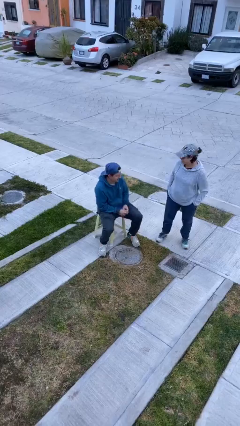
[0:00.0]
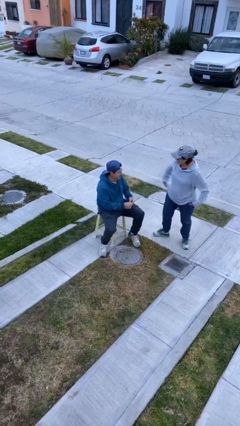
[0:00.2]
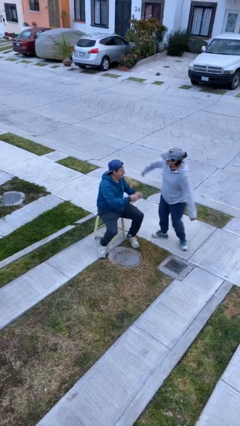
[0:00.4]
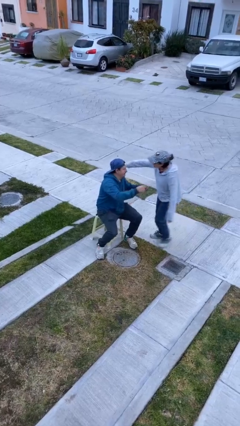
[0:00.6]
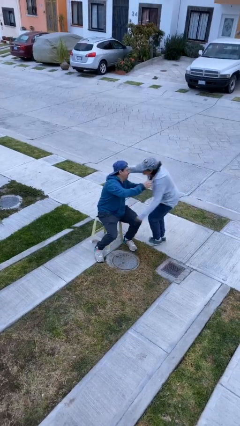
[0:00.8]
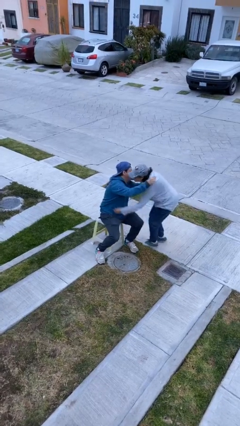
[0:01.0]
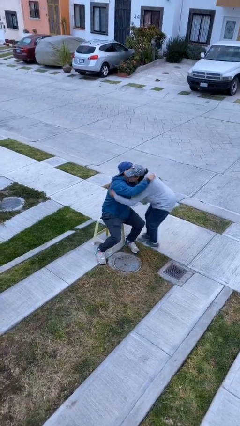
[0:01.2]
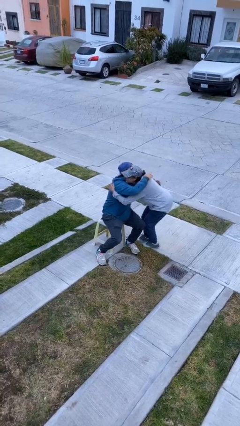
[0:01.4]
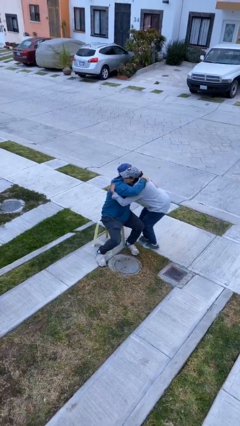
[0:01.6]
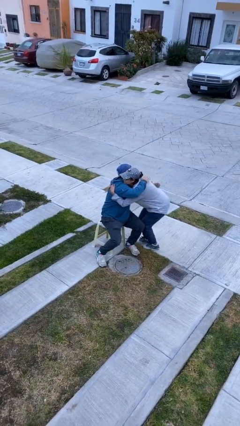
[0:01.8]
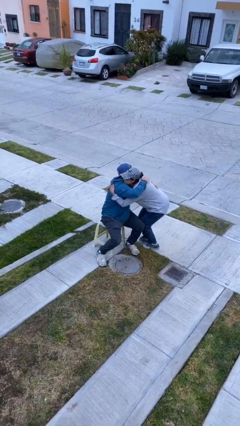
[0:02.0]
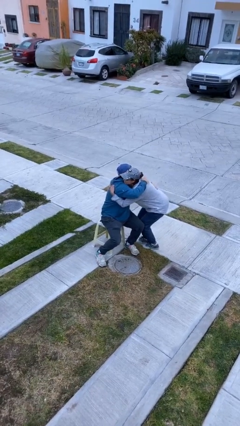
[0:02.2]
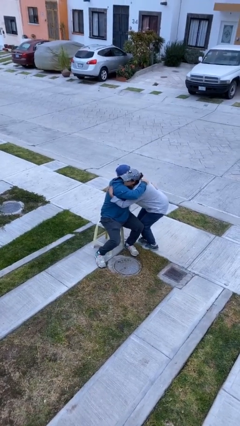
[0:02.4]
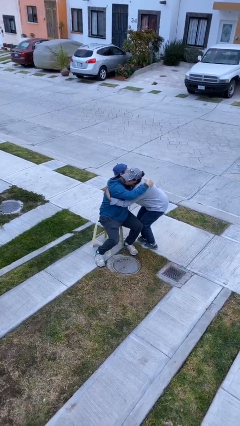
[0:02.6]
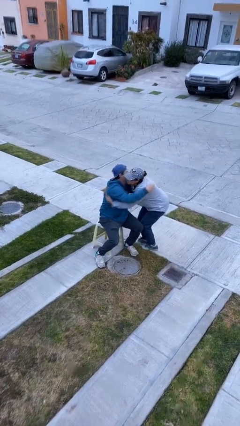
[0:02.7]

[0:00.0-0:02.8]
person embraces person

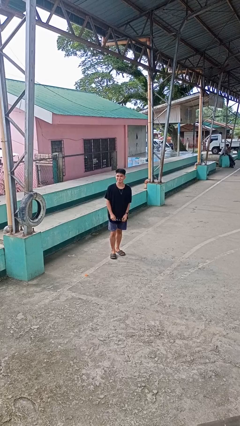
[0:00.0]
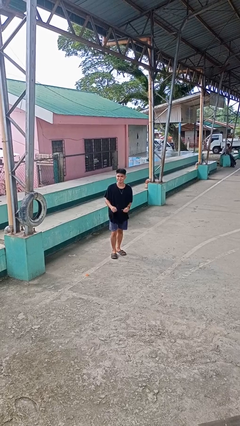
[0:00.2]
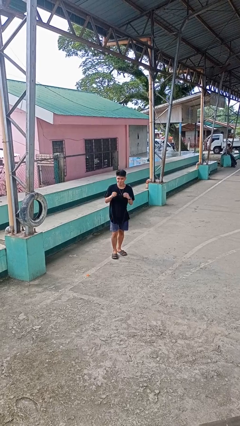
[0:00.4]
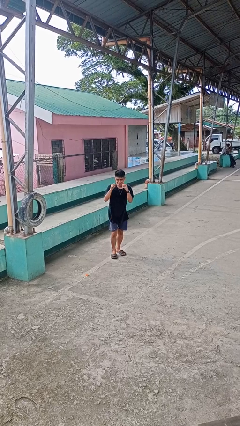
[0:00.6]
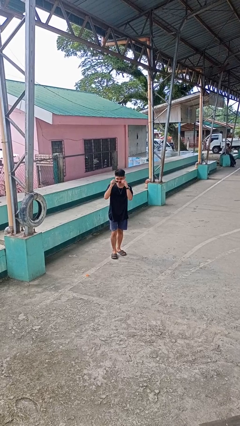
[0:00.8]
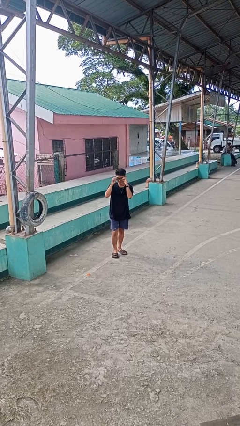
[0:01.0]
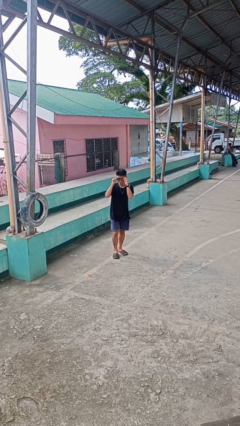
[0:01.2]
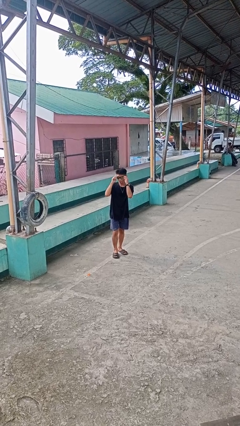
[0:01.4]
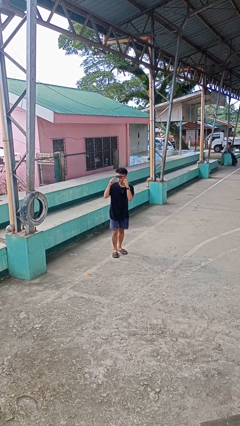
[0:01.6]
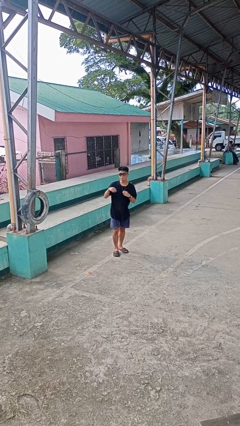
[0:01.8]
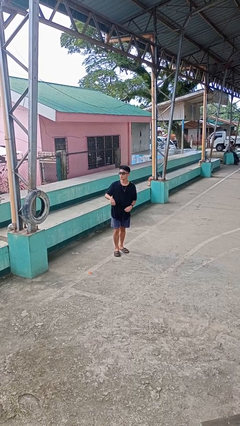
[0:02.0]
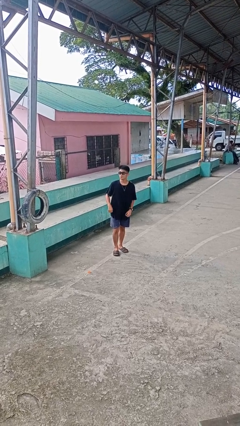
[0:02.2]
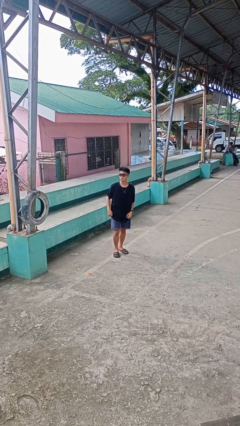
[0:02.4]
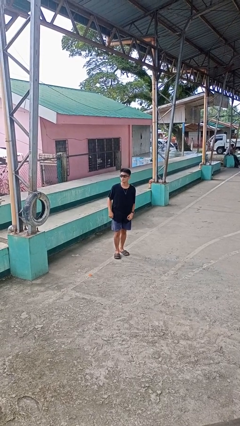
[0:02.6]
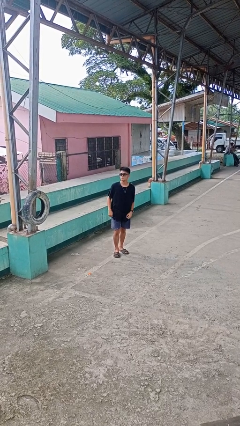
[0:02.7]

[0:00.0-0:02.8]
person puts on sunglasses

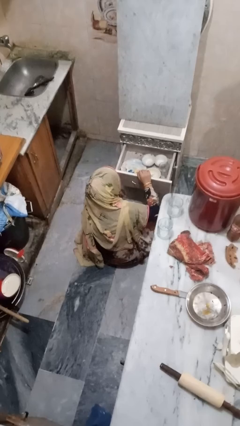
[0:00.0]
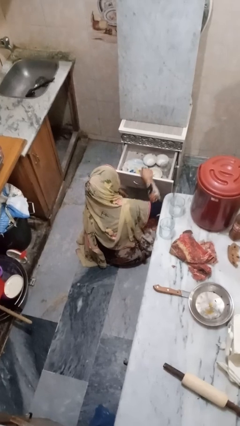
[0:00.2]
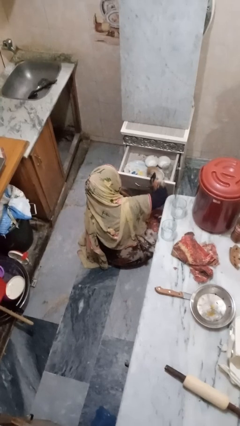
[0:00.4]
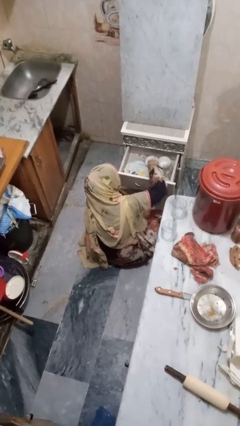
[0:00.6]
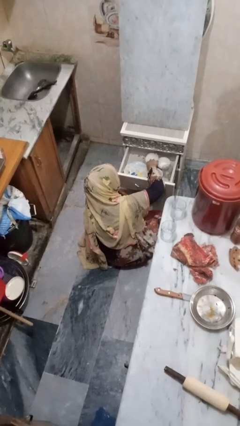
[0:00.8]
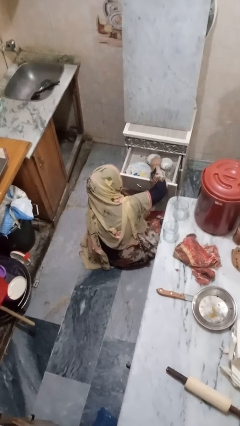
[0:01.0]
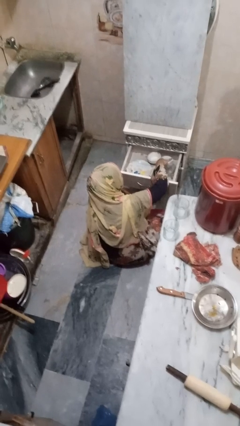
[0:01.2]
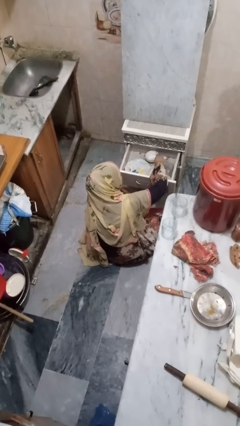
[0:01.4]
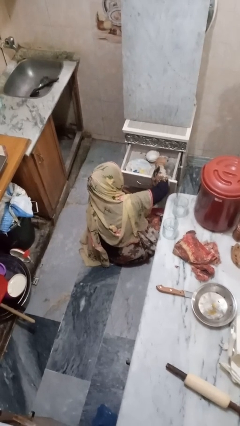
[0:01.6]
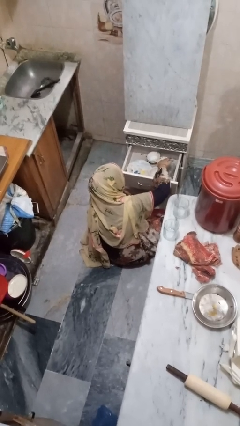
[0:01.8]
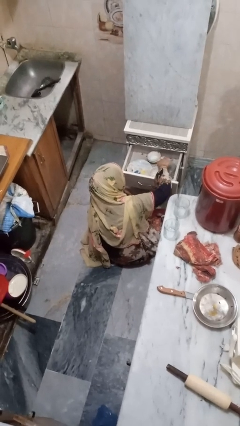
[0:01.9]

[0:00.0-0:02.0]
person searches in kitchen drawer

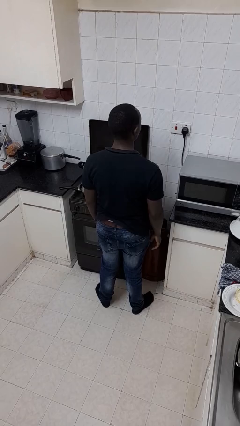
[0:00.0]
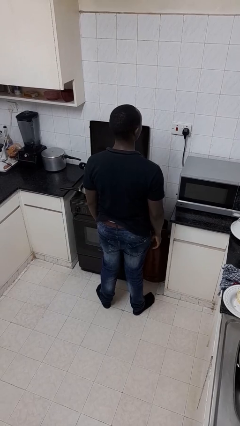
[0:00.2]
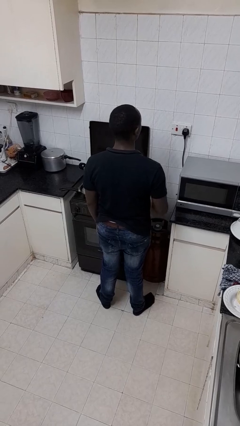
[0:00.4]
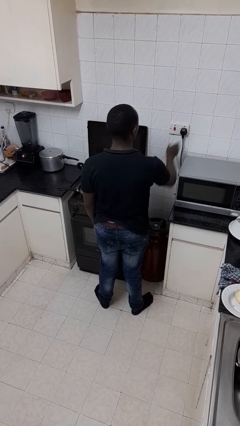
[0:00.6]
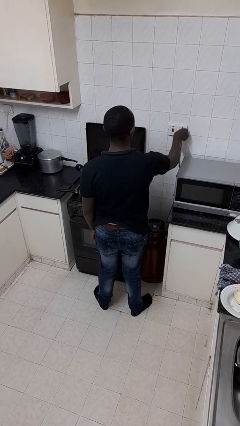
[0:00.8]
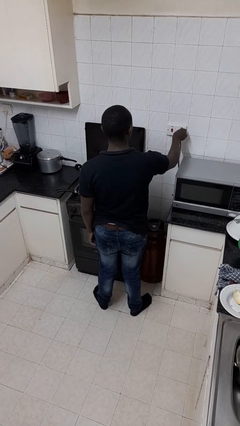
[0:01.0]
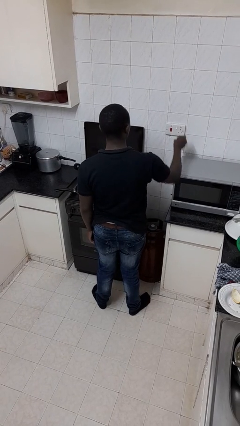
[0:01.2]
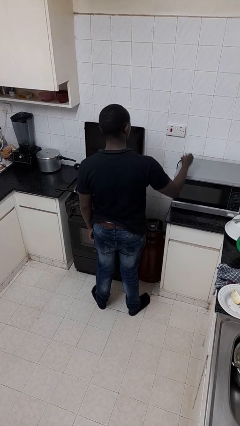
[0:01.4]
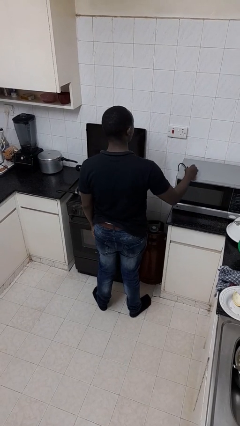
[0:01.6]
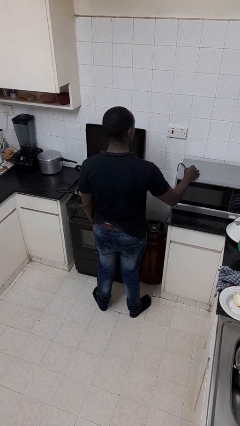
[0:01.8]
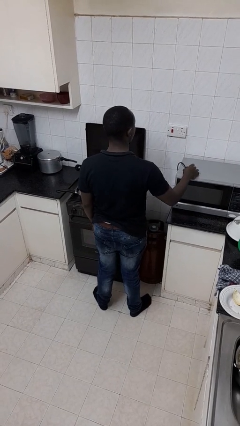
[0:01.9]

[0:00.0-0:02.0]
person unplugs from electrical socket

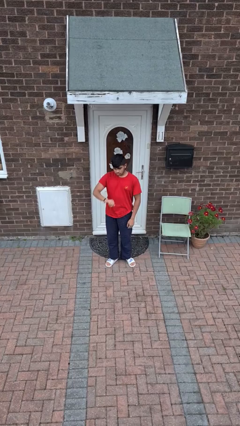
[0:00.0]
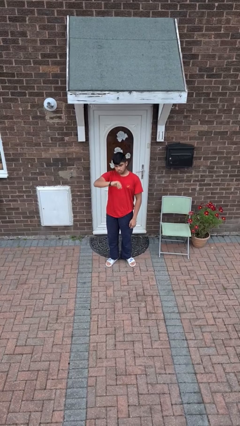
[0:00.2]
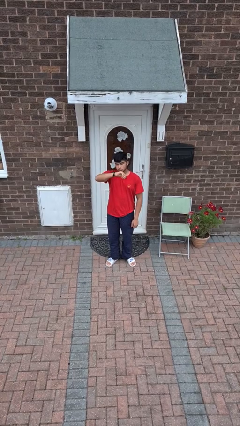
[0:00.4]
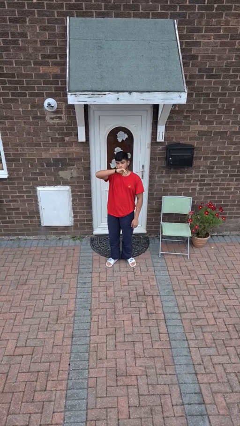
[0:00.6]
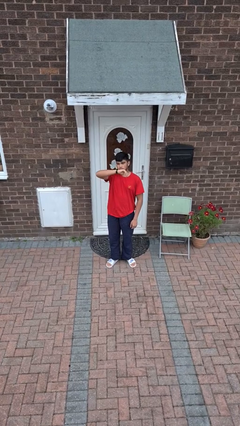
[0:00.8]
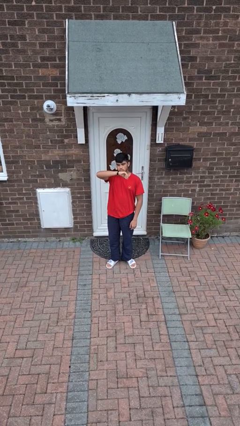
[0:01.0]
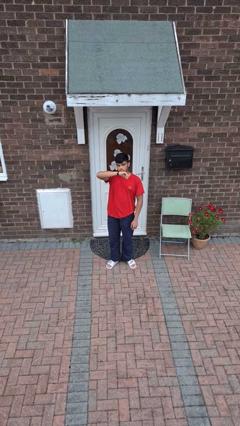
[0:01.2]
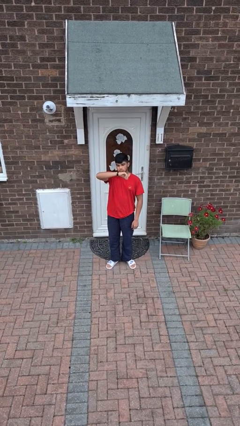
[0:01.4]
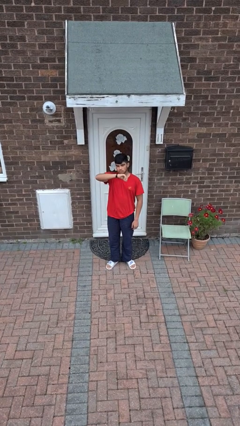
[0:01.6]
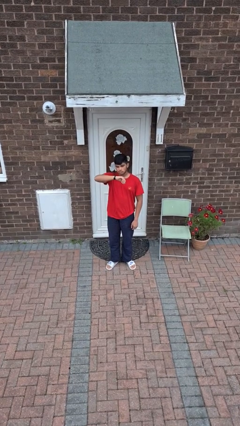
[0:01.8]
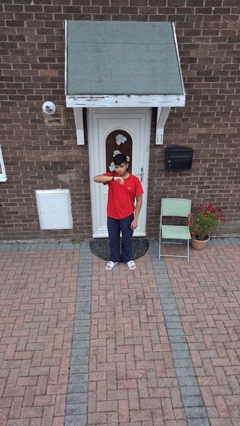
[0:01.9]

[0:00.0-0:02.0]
person looks at wristwatch

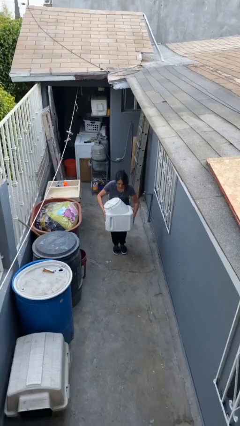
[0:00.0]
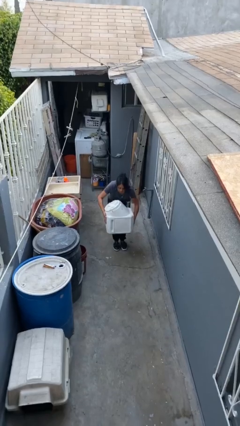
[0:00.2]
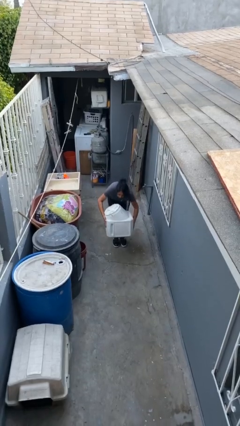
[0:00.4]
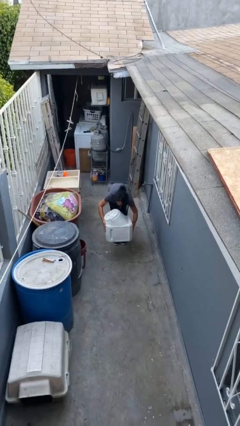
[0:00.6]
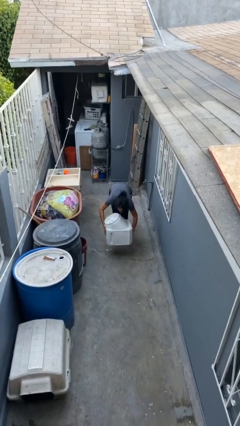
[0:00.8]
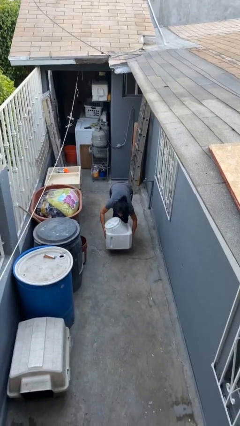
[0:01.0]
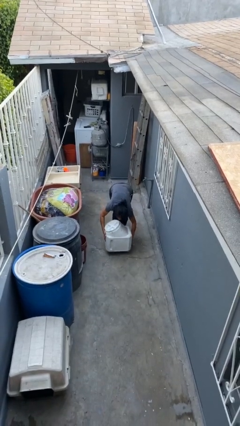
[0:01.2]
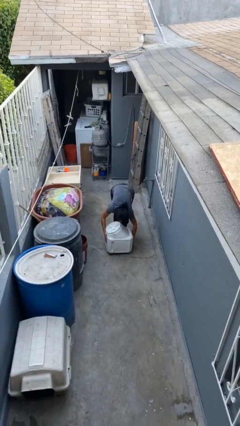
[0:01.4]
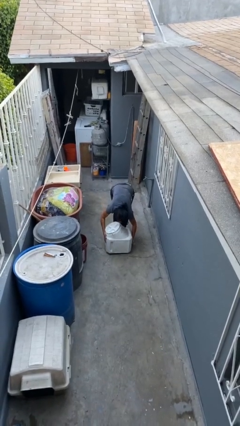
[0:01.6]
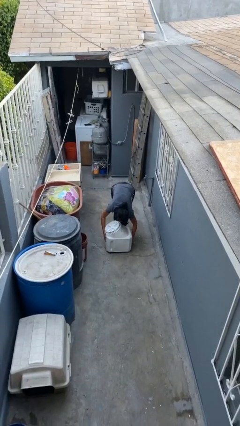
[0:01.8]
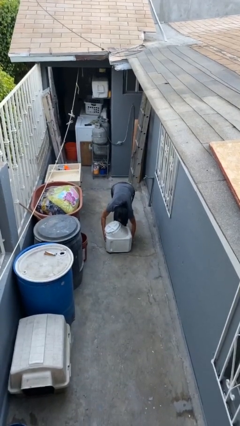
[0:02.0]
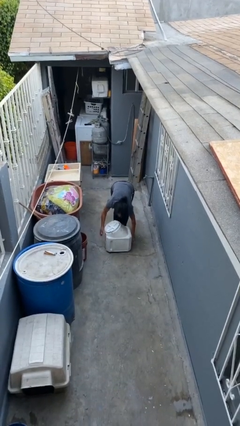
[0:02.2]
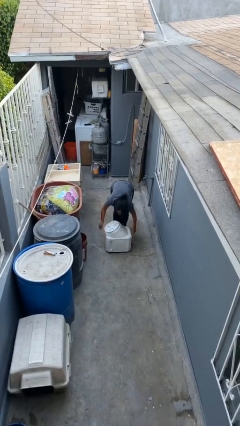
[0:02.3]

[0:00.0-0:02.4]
person puts down object on floor

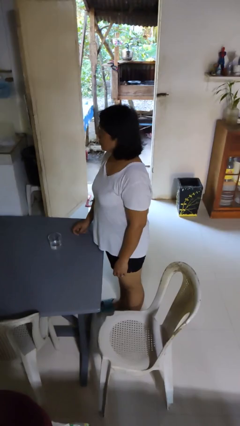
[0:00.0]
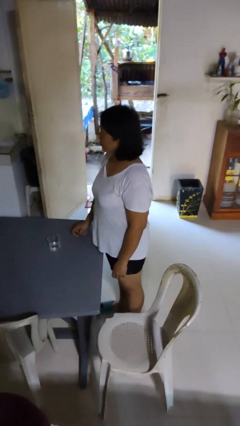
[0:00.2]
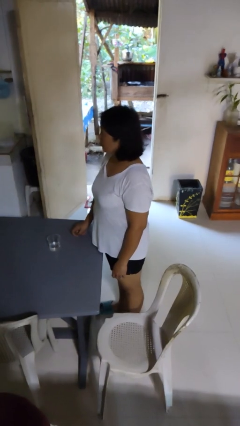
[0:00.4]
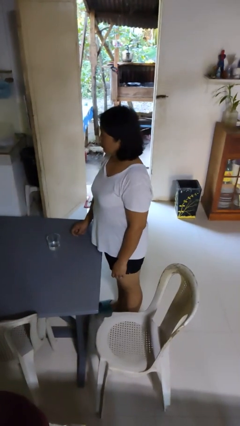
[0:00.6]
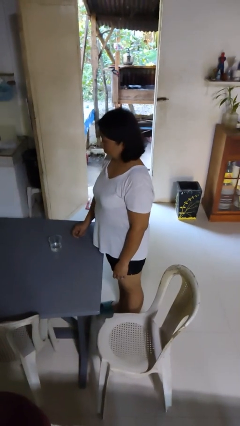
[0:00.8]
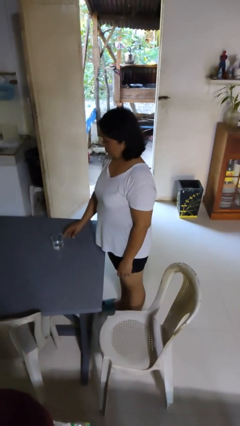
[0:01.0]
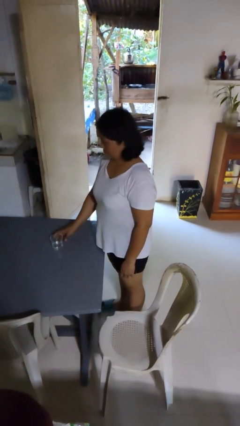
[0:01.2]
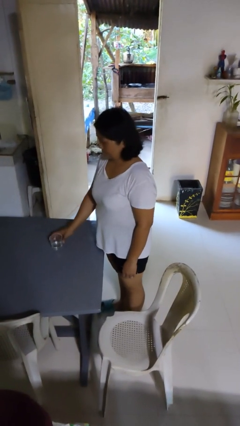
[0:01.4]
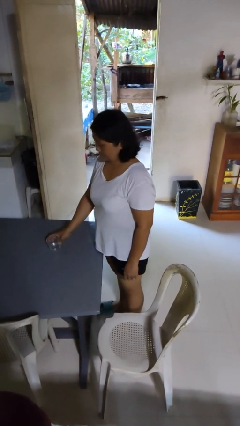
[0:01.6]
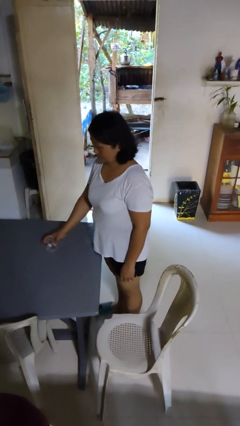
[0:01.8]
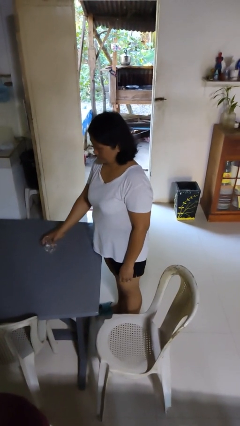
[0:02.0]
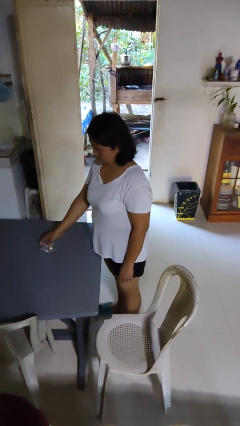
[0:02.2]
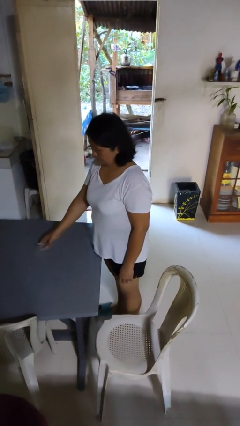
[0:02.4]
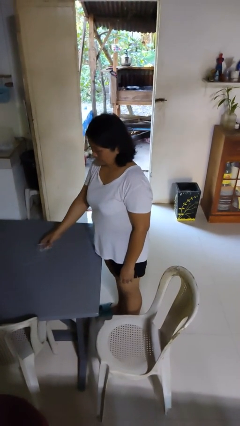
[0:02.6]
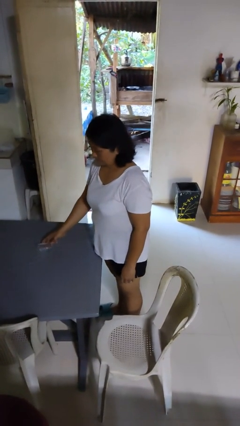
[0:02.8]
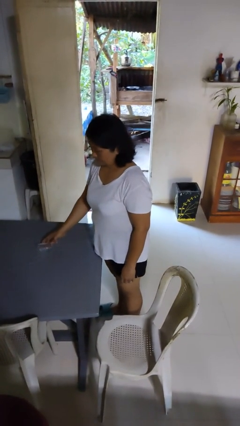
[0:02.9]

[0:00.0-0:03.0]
person spills on table
